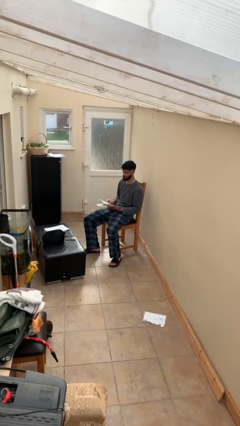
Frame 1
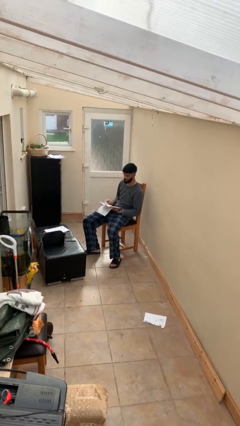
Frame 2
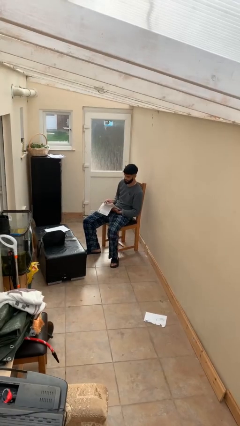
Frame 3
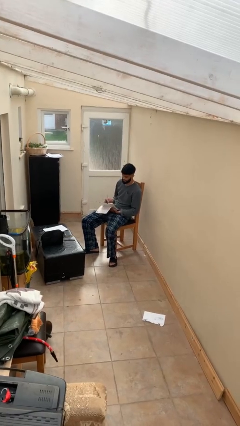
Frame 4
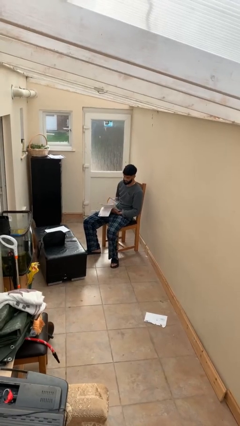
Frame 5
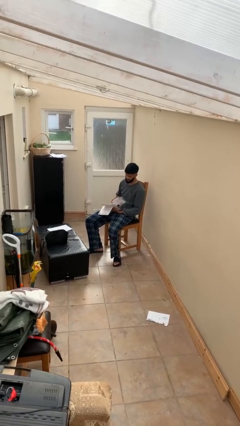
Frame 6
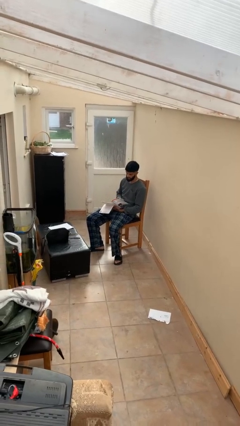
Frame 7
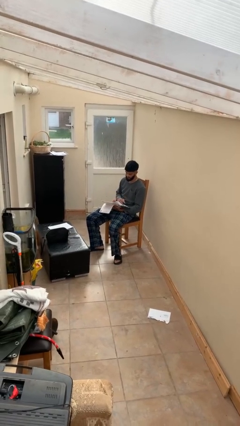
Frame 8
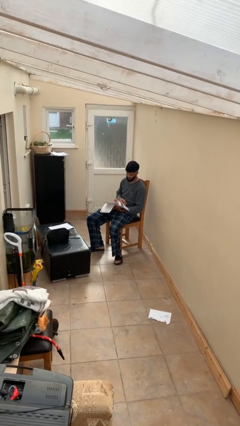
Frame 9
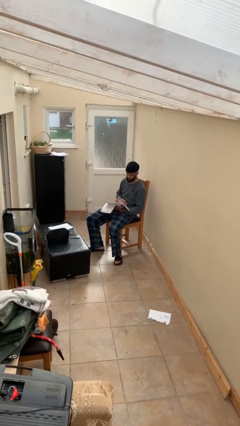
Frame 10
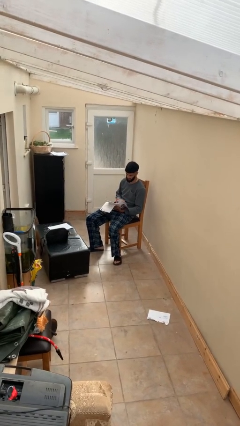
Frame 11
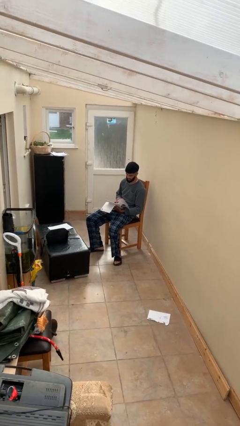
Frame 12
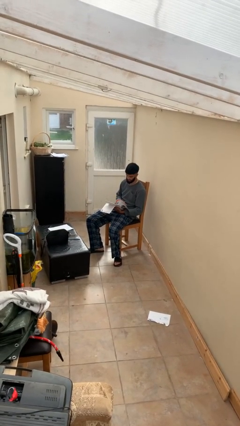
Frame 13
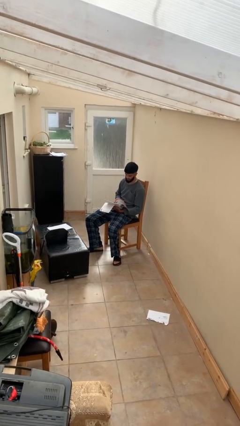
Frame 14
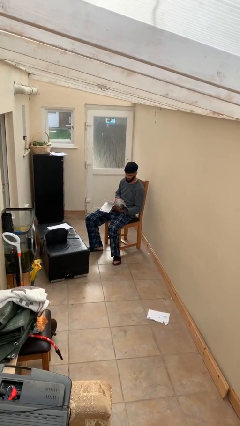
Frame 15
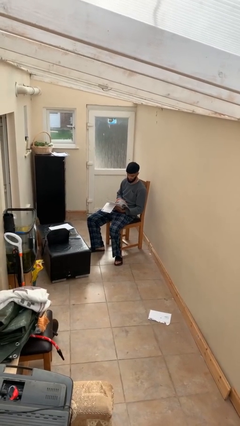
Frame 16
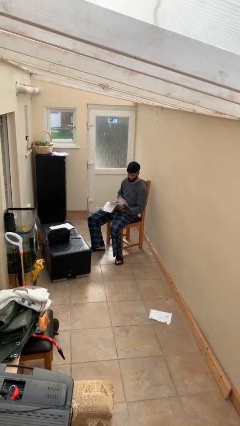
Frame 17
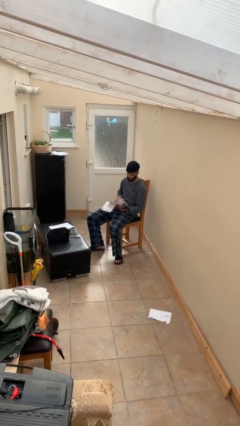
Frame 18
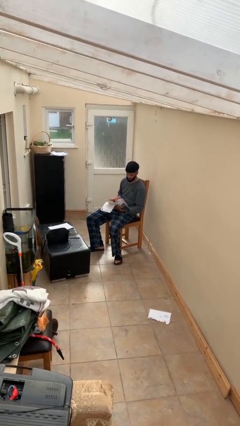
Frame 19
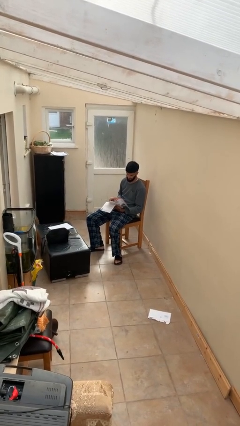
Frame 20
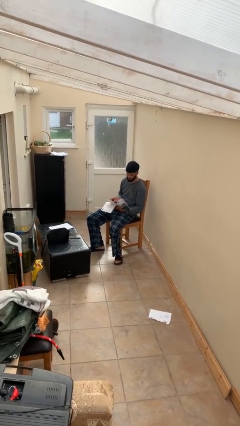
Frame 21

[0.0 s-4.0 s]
person reads document

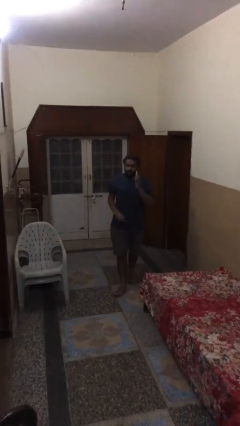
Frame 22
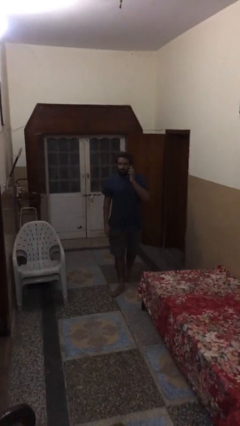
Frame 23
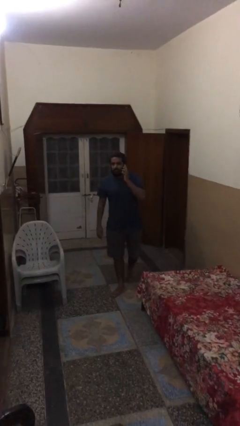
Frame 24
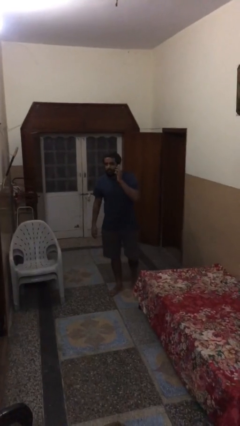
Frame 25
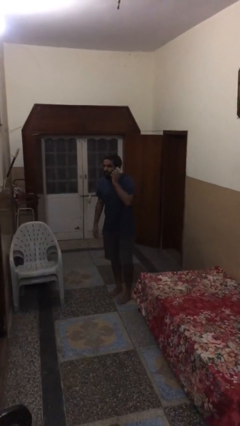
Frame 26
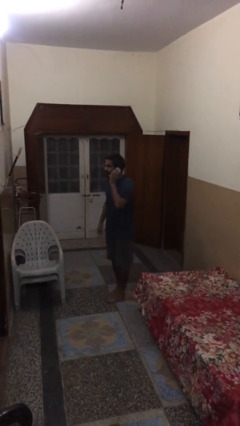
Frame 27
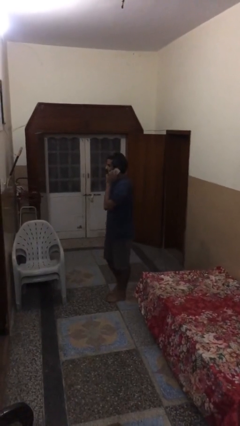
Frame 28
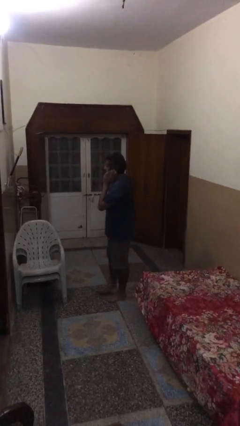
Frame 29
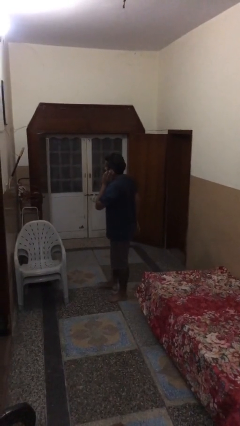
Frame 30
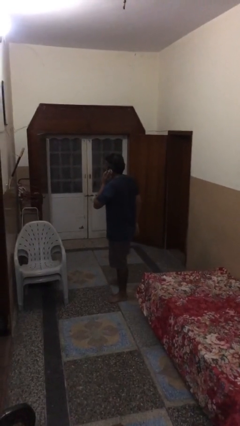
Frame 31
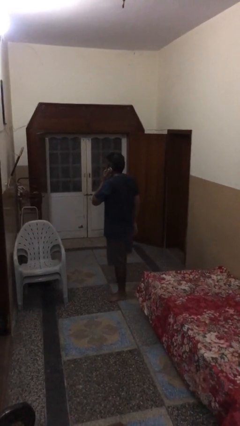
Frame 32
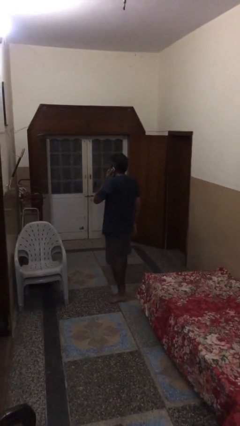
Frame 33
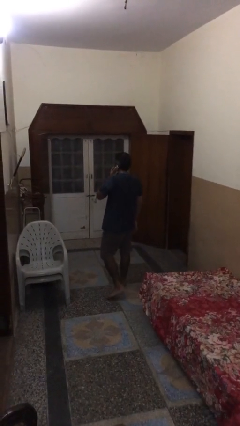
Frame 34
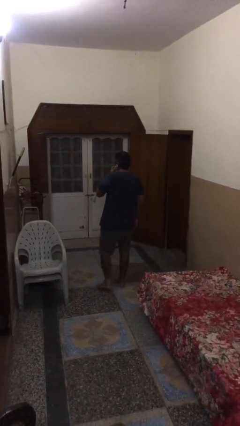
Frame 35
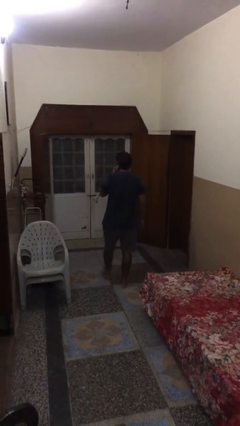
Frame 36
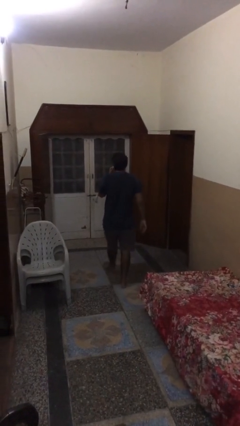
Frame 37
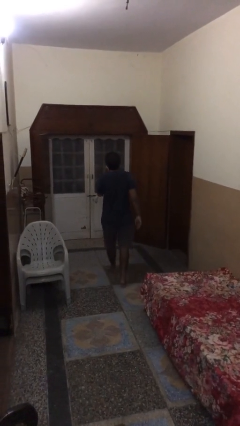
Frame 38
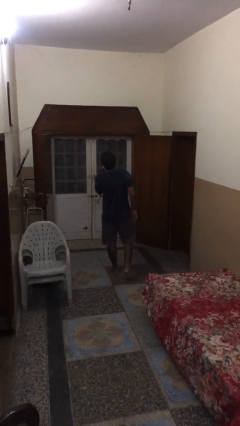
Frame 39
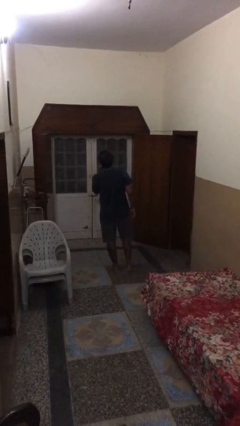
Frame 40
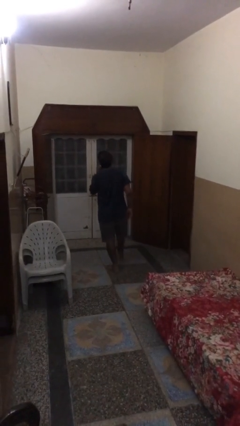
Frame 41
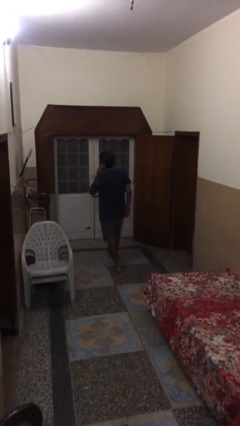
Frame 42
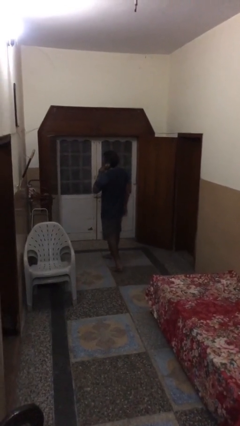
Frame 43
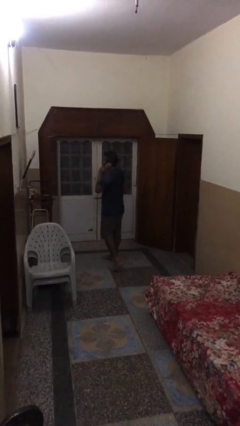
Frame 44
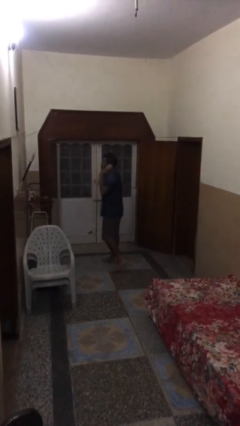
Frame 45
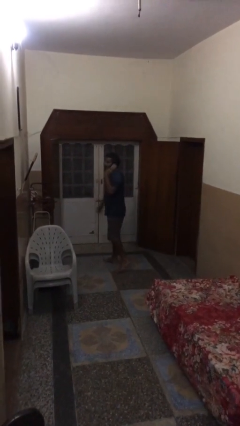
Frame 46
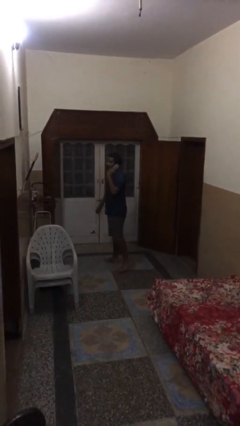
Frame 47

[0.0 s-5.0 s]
person talks on phone

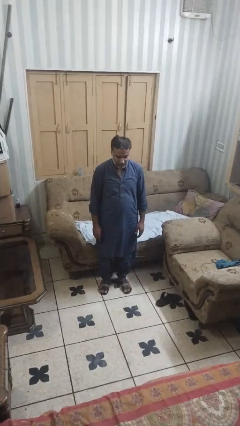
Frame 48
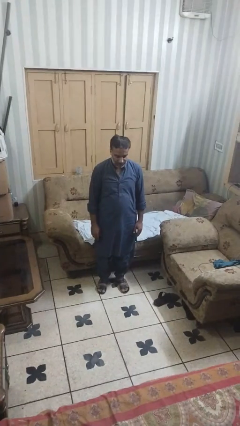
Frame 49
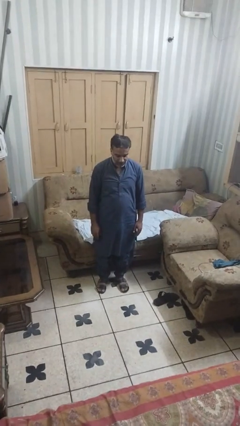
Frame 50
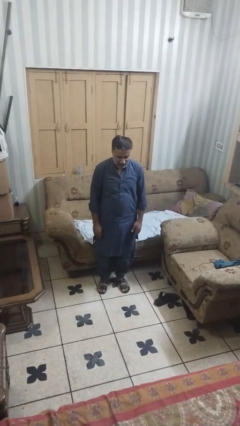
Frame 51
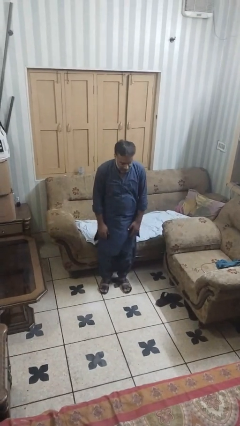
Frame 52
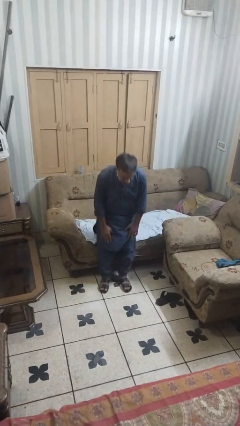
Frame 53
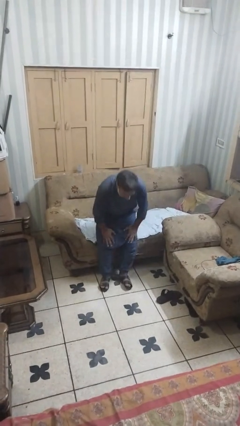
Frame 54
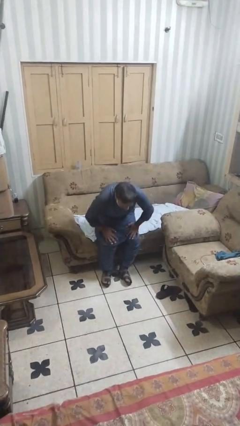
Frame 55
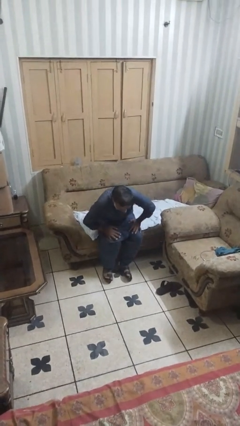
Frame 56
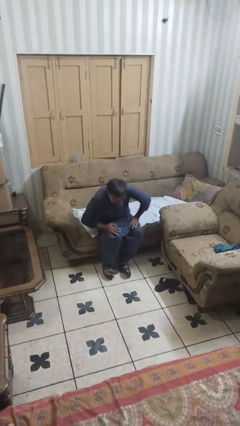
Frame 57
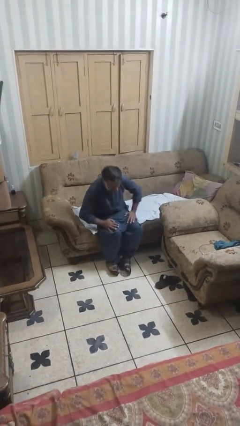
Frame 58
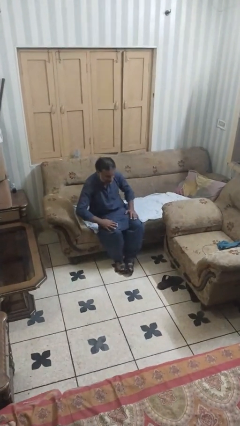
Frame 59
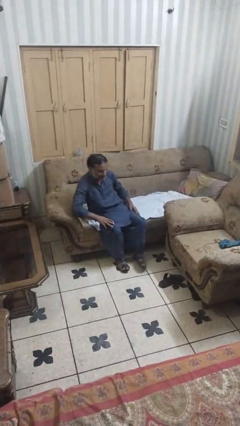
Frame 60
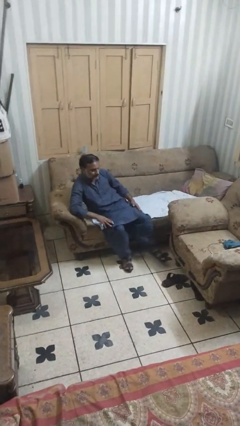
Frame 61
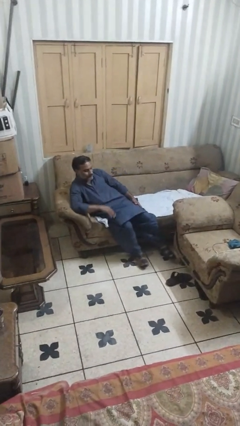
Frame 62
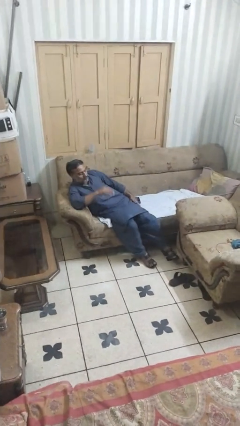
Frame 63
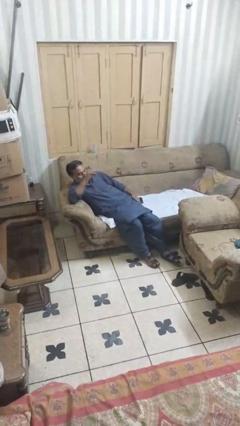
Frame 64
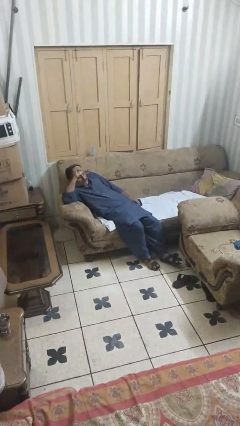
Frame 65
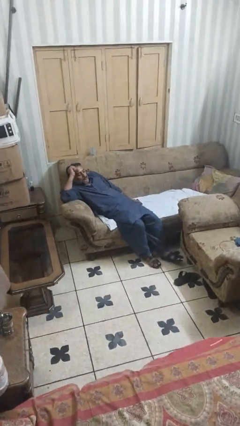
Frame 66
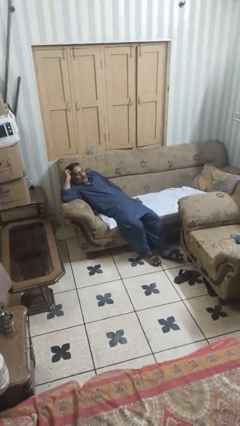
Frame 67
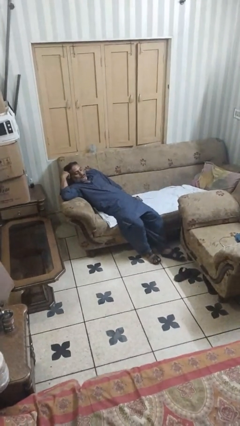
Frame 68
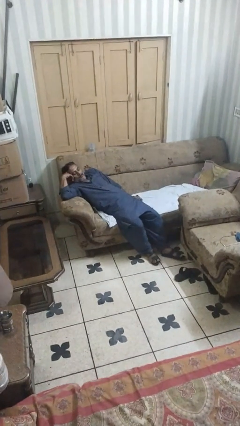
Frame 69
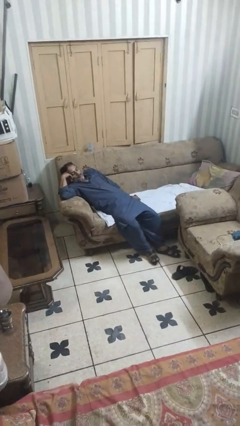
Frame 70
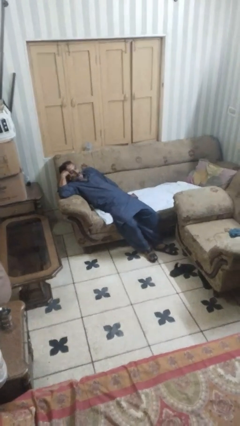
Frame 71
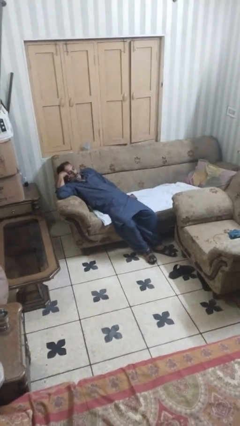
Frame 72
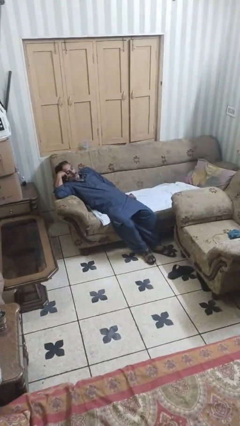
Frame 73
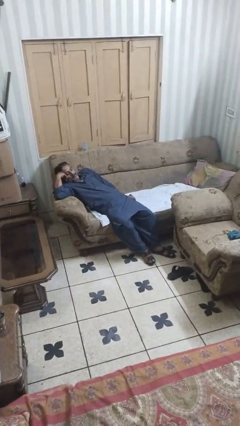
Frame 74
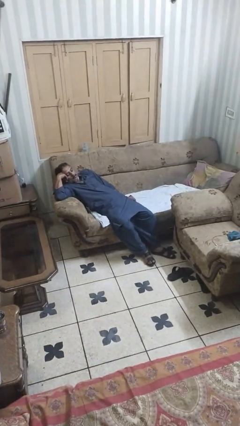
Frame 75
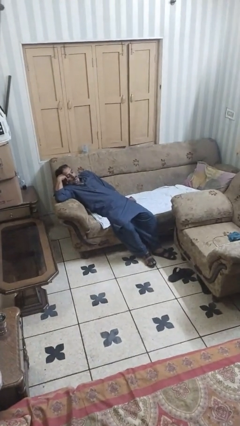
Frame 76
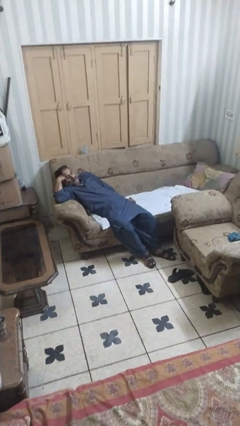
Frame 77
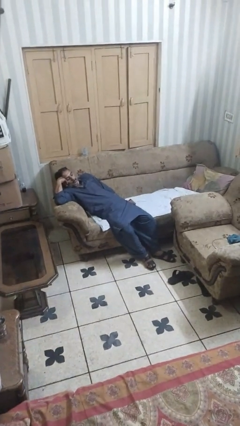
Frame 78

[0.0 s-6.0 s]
person lies down on couch

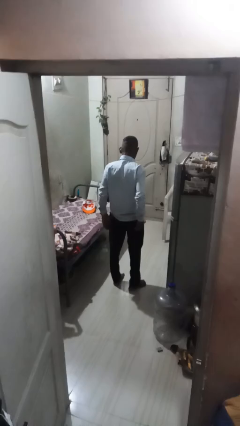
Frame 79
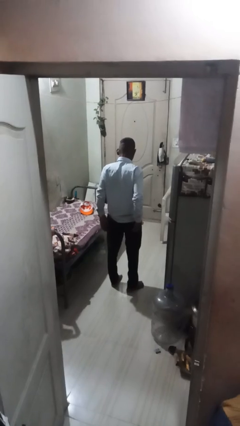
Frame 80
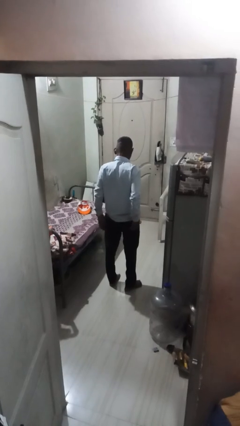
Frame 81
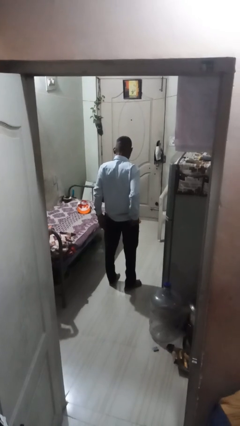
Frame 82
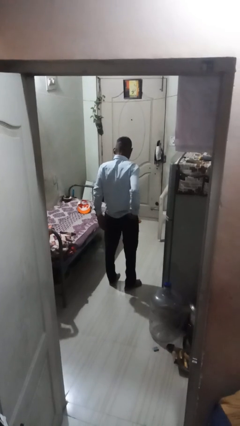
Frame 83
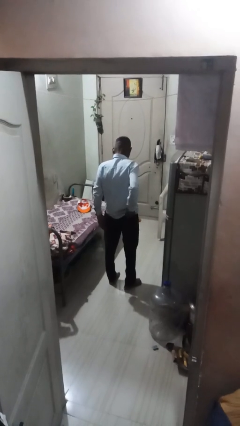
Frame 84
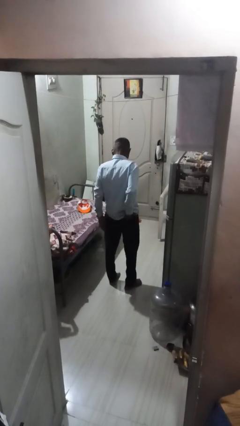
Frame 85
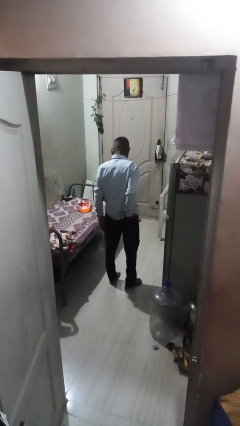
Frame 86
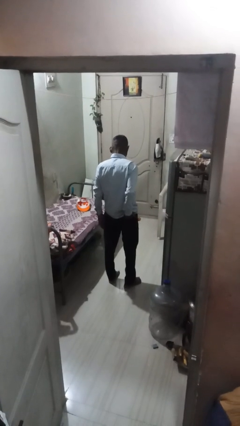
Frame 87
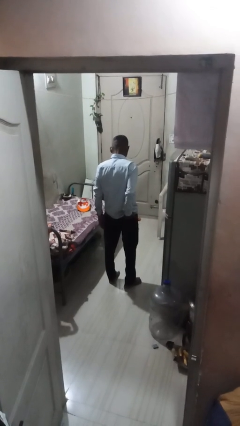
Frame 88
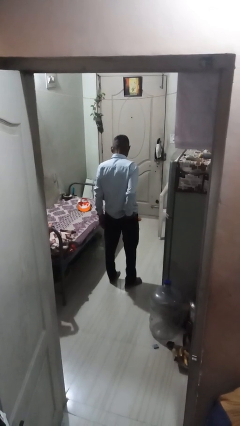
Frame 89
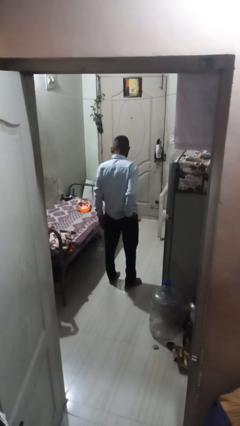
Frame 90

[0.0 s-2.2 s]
person puts hands in back pockets

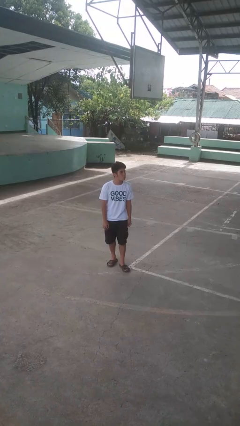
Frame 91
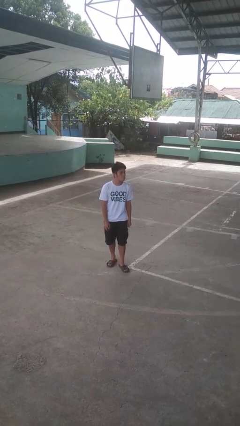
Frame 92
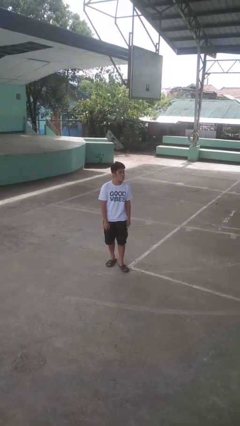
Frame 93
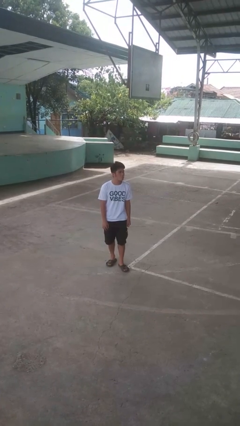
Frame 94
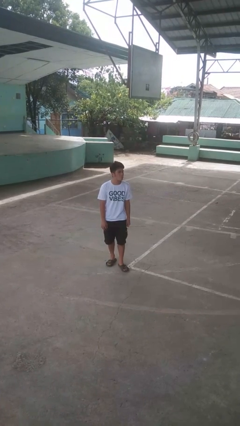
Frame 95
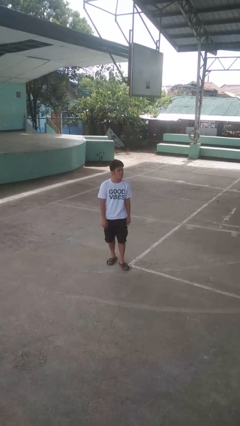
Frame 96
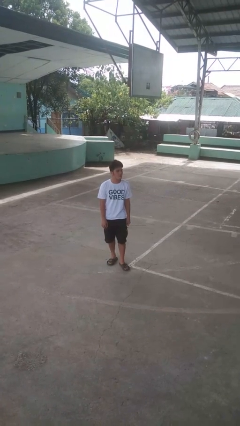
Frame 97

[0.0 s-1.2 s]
person sticks out tongue
